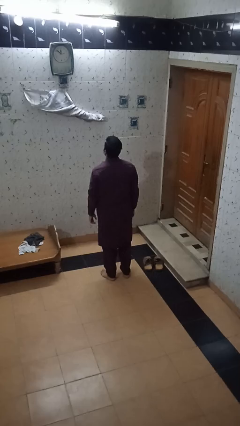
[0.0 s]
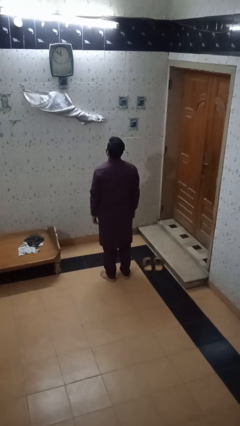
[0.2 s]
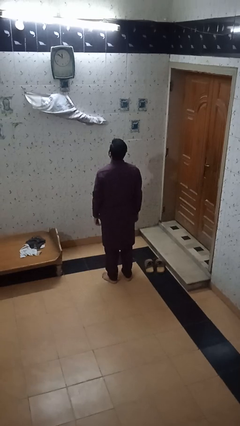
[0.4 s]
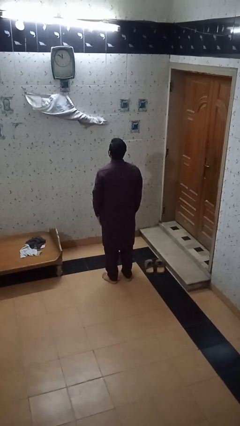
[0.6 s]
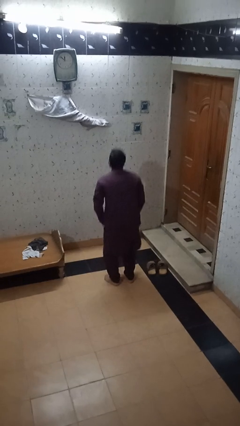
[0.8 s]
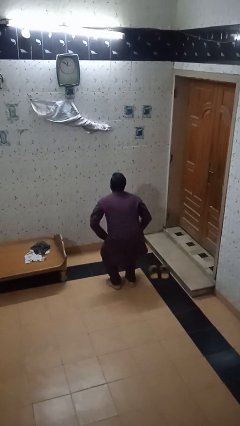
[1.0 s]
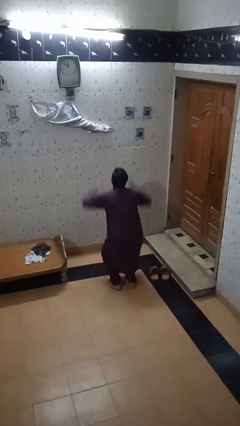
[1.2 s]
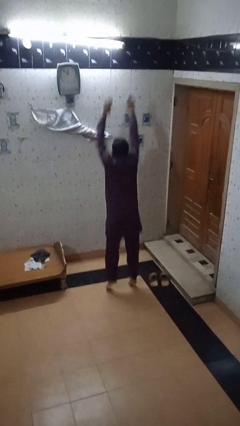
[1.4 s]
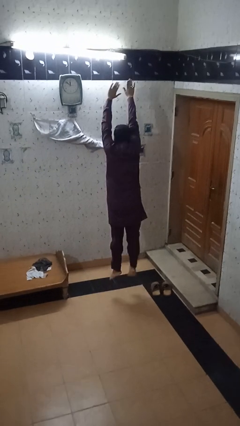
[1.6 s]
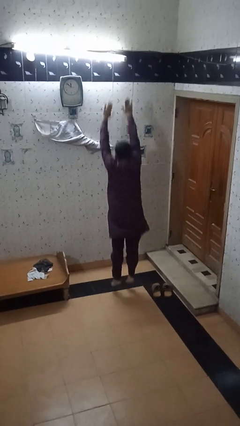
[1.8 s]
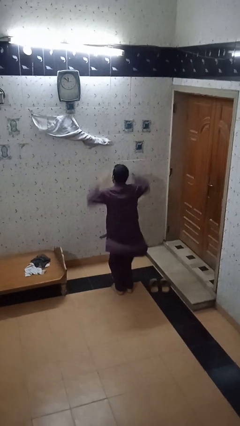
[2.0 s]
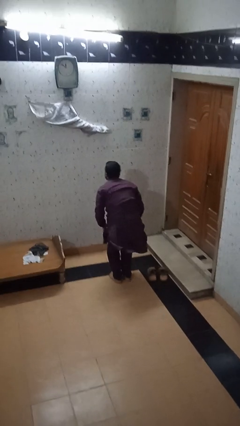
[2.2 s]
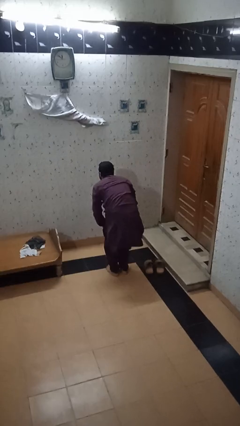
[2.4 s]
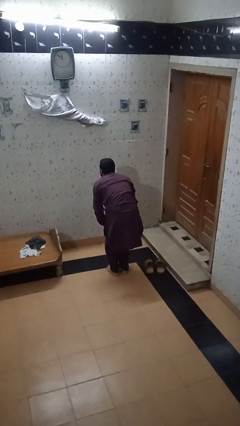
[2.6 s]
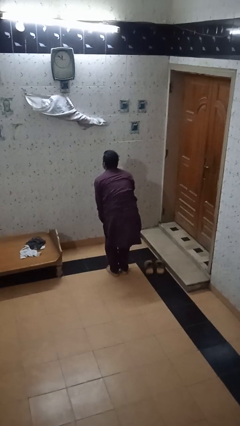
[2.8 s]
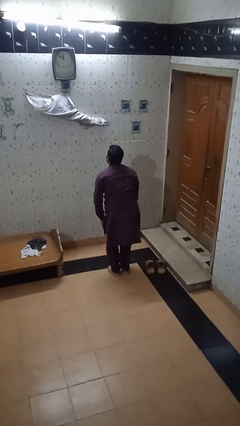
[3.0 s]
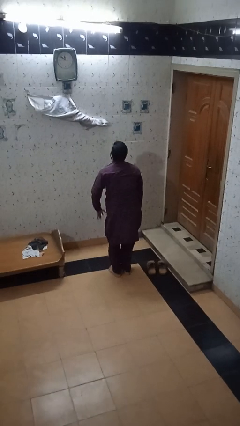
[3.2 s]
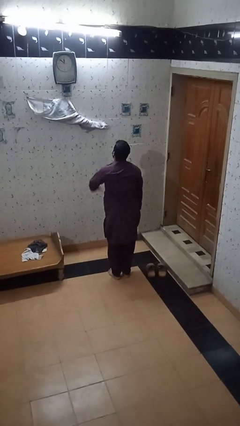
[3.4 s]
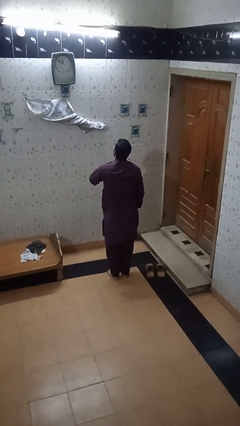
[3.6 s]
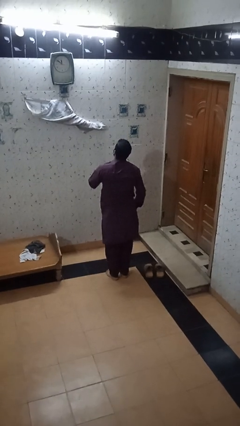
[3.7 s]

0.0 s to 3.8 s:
person jumps

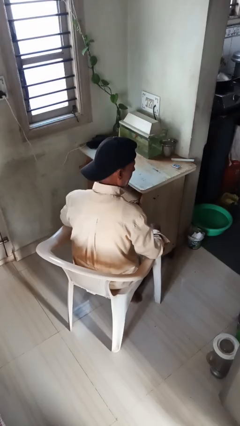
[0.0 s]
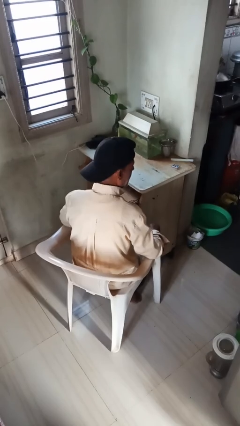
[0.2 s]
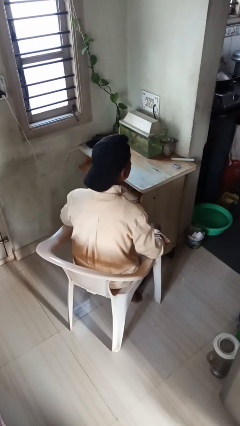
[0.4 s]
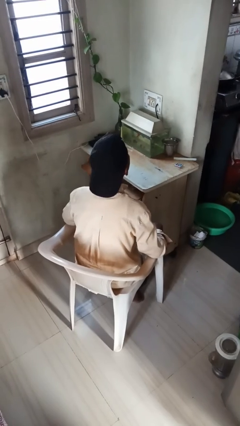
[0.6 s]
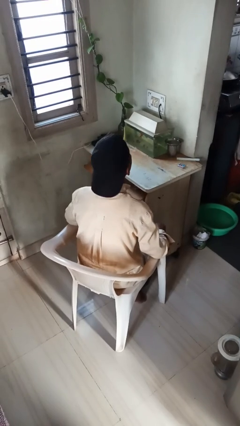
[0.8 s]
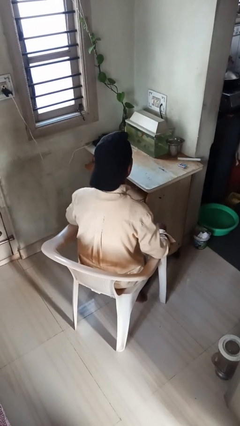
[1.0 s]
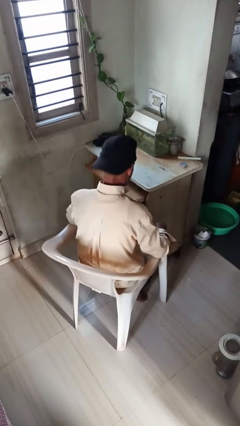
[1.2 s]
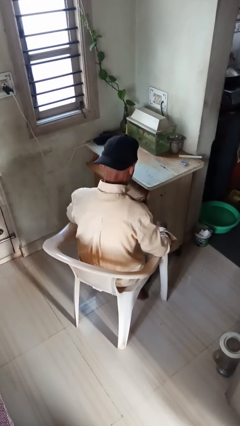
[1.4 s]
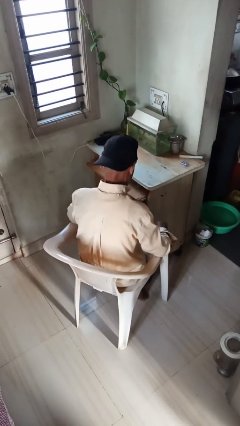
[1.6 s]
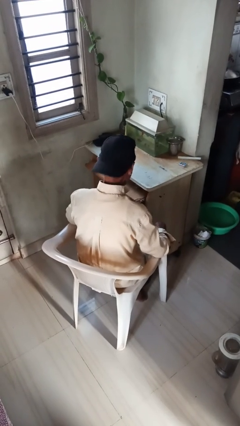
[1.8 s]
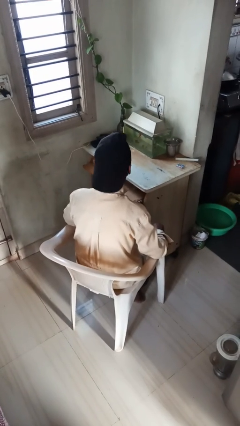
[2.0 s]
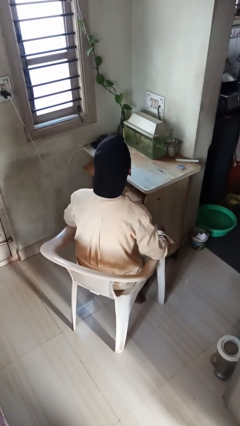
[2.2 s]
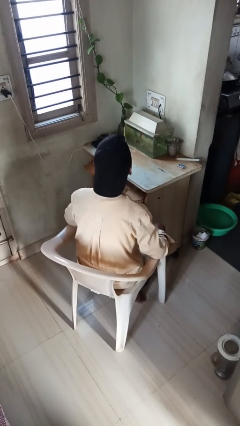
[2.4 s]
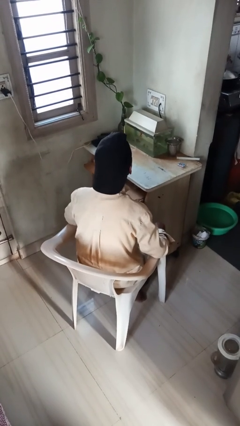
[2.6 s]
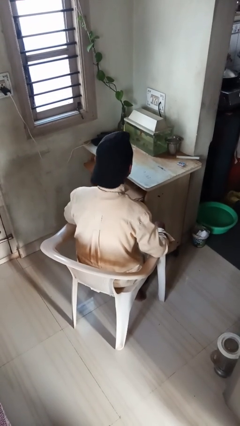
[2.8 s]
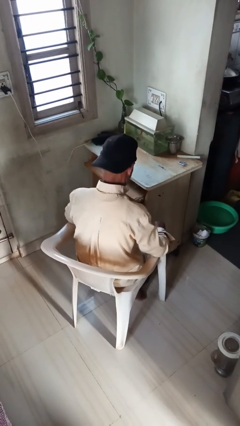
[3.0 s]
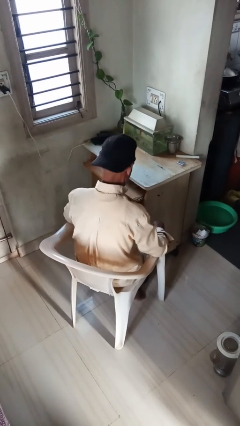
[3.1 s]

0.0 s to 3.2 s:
person nods head

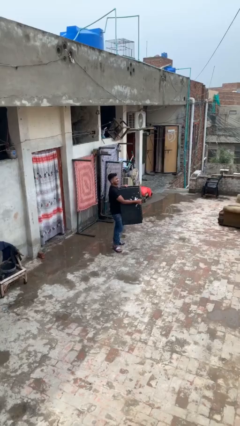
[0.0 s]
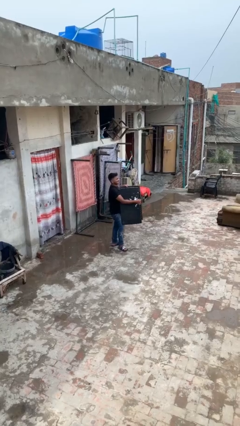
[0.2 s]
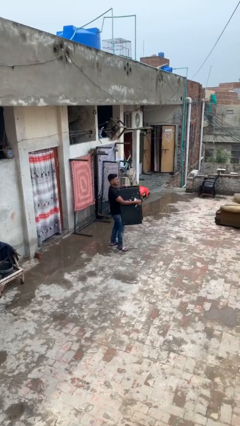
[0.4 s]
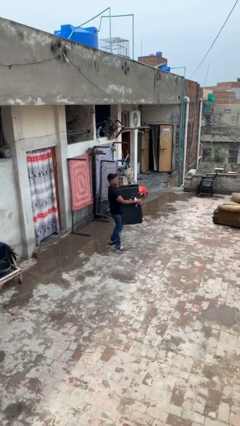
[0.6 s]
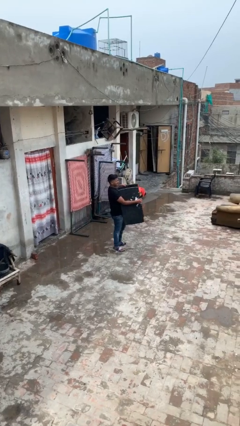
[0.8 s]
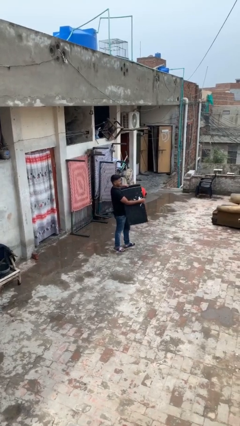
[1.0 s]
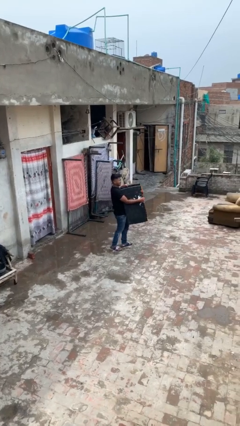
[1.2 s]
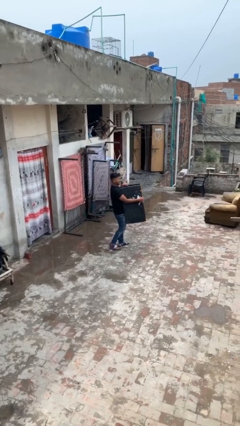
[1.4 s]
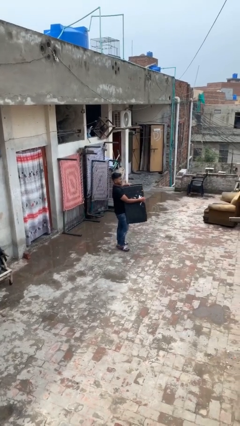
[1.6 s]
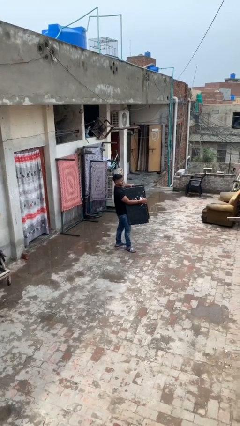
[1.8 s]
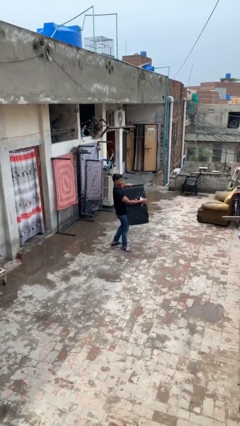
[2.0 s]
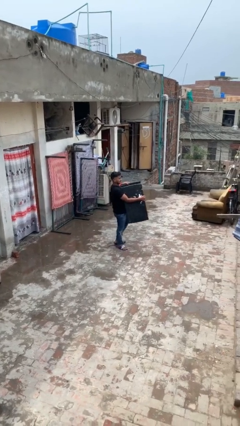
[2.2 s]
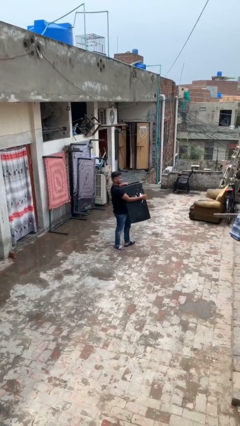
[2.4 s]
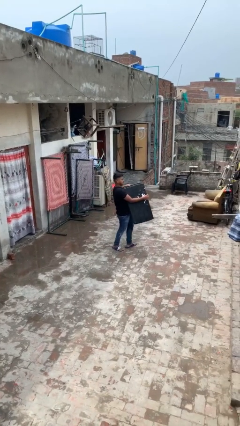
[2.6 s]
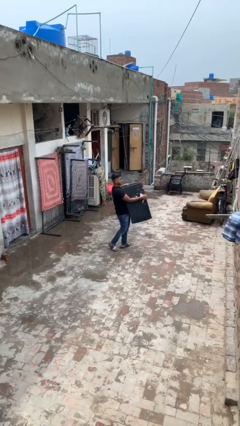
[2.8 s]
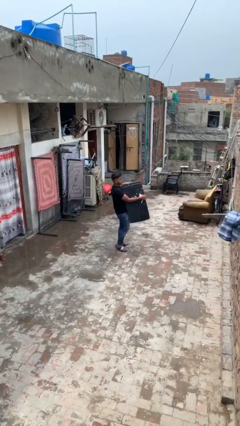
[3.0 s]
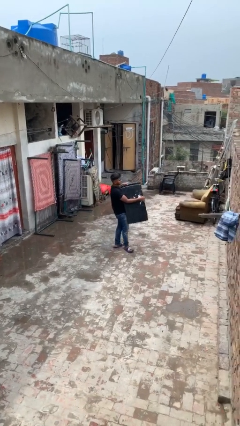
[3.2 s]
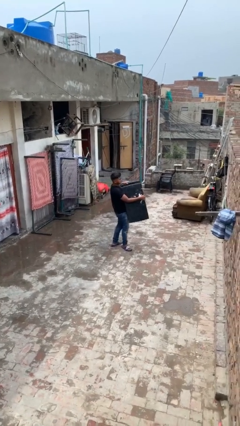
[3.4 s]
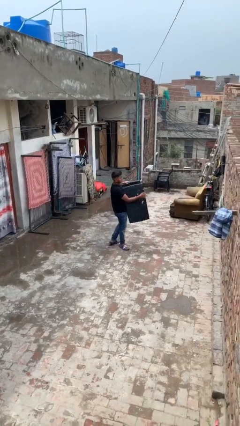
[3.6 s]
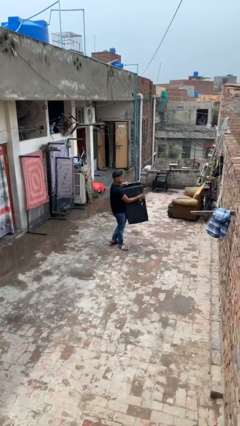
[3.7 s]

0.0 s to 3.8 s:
person carries heavy object

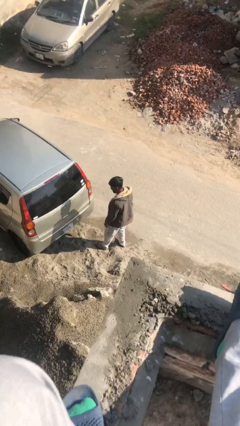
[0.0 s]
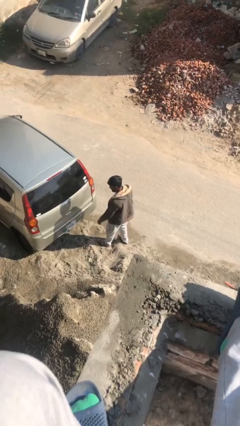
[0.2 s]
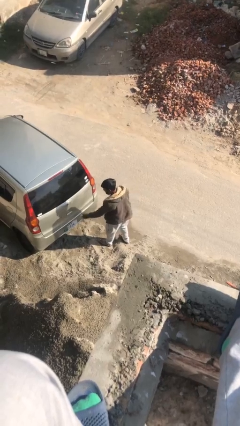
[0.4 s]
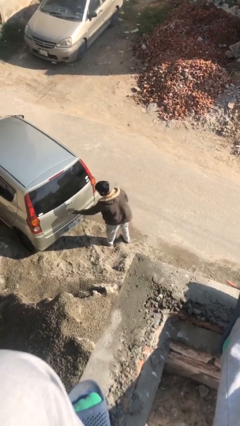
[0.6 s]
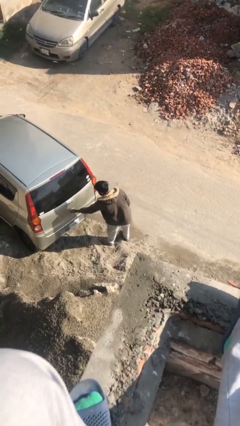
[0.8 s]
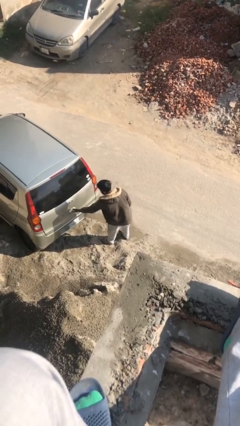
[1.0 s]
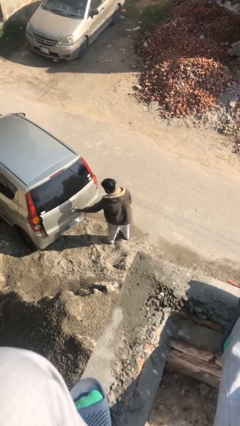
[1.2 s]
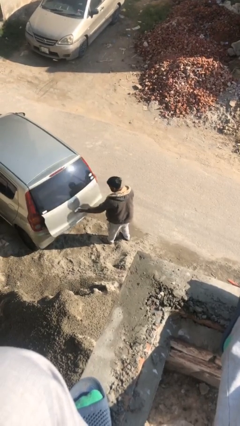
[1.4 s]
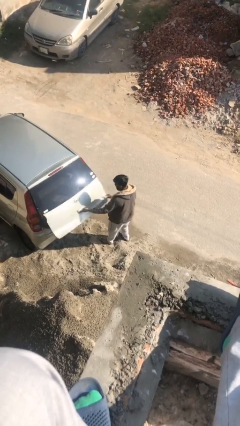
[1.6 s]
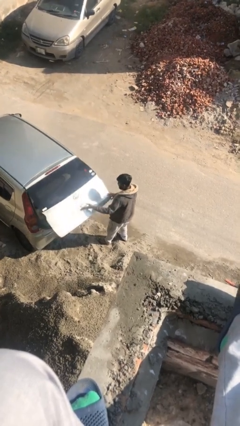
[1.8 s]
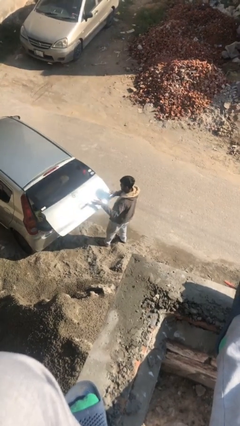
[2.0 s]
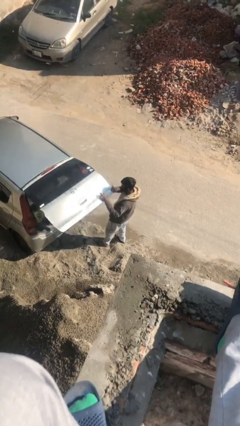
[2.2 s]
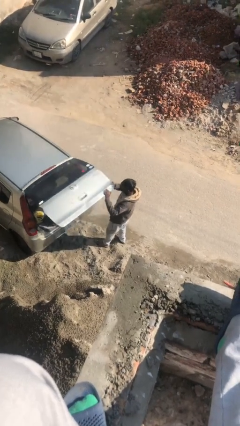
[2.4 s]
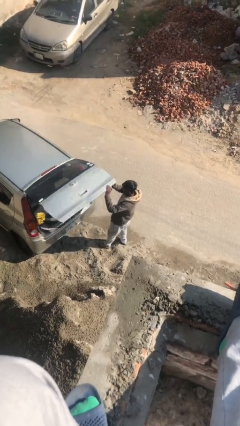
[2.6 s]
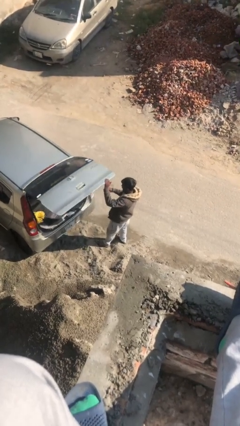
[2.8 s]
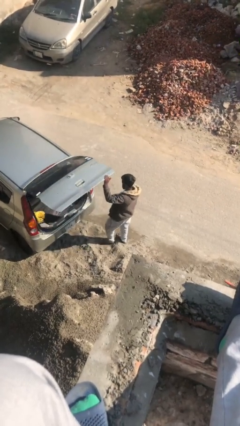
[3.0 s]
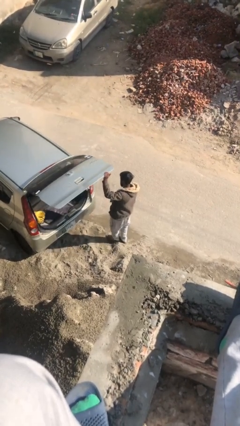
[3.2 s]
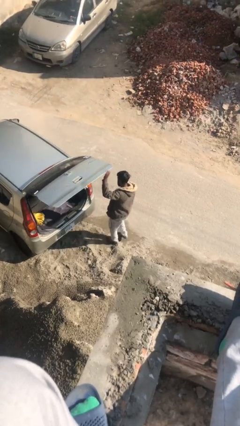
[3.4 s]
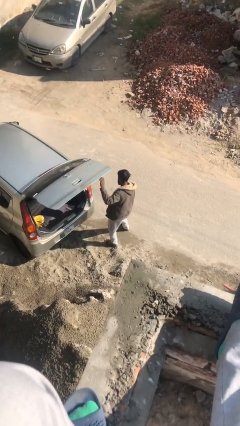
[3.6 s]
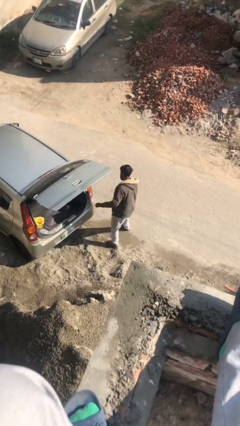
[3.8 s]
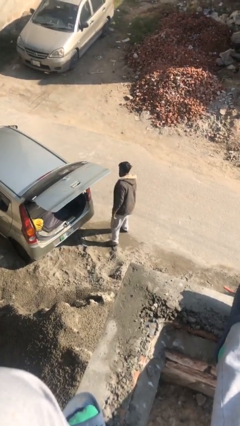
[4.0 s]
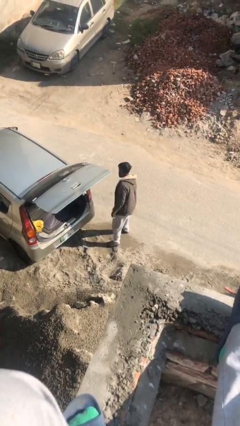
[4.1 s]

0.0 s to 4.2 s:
person opens car trunk

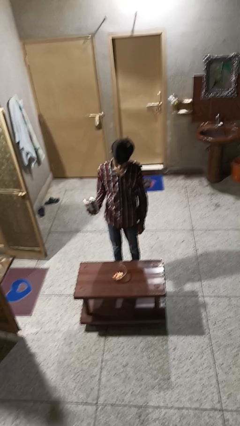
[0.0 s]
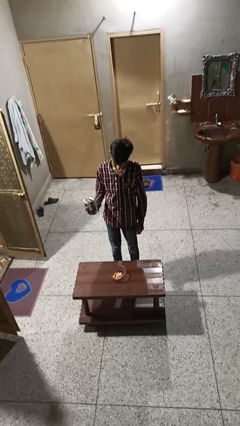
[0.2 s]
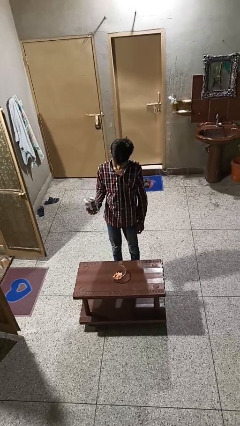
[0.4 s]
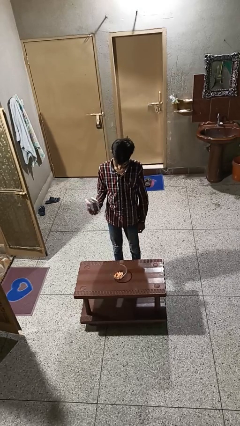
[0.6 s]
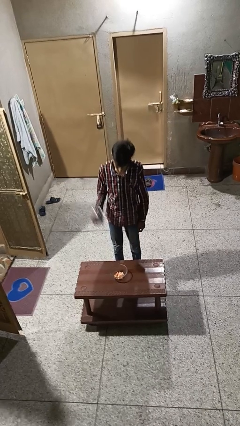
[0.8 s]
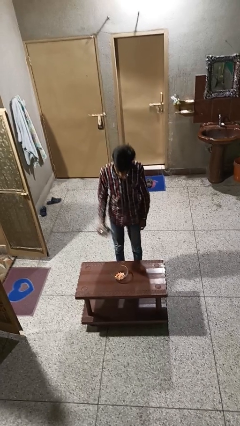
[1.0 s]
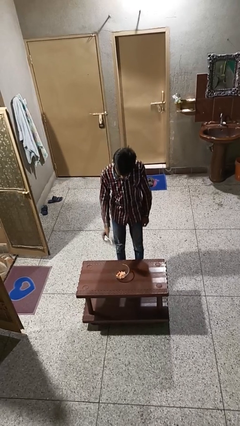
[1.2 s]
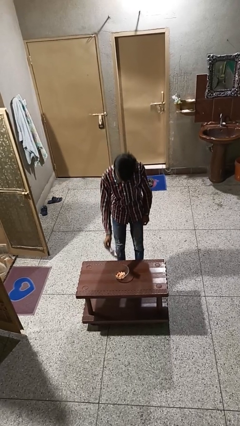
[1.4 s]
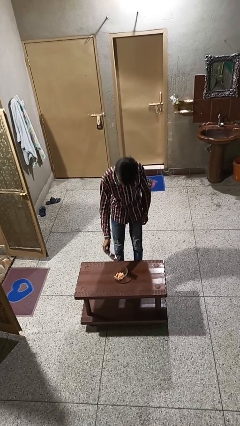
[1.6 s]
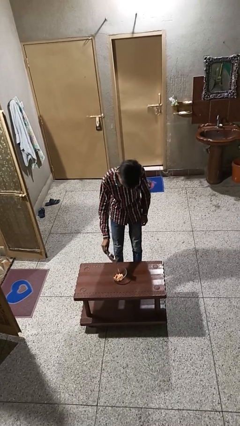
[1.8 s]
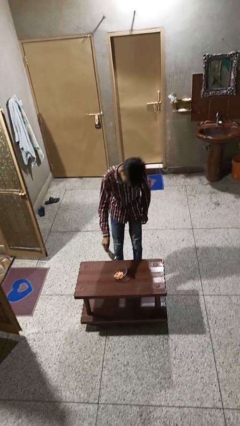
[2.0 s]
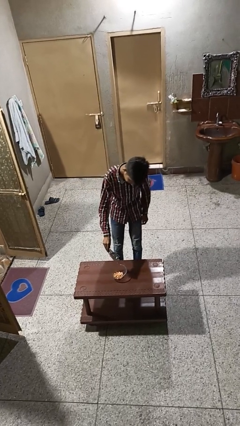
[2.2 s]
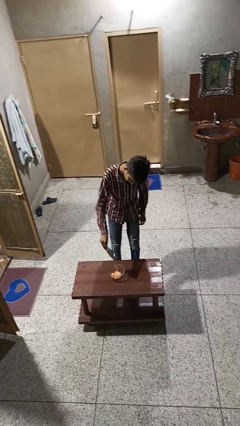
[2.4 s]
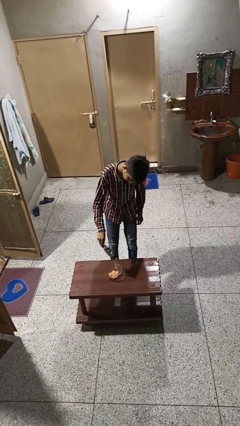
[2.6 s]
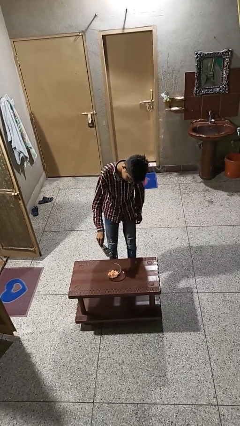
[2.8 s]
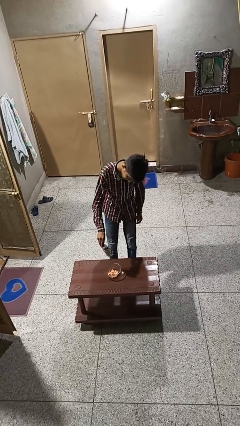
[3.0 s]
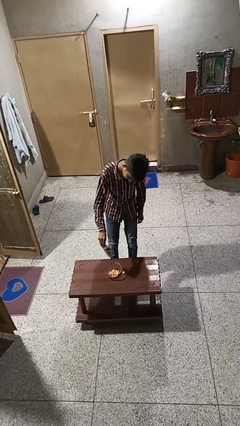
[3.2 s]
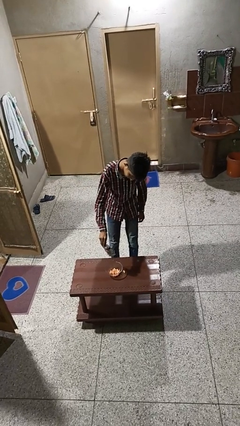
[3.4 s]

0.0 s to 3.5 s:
person pours into bowl
